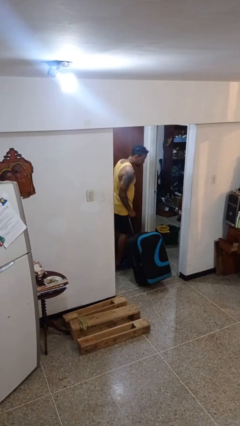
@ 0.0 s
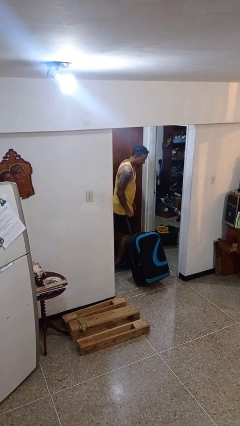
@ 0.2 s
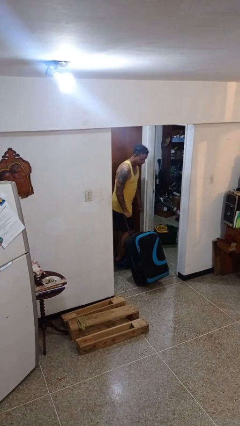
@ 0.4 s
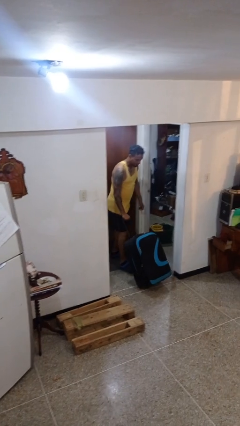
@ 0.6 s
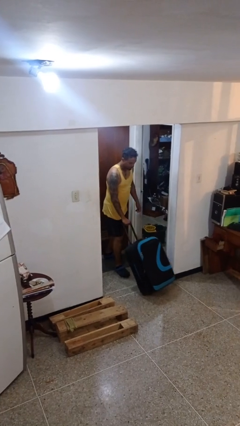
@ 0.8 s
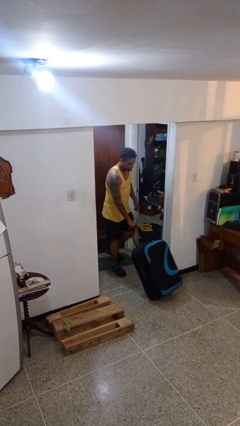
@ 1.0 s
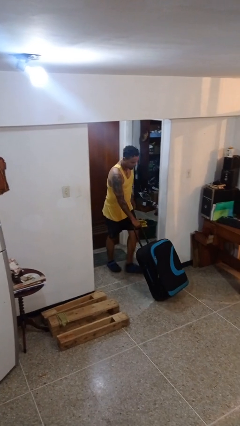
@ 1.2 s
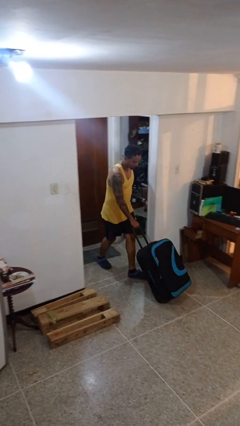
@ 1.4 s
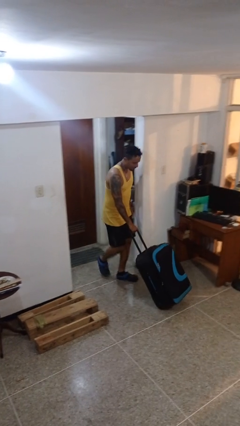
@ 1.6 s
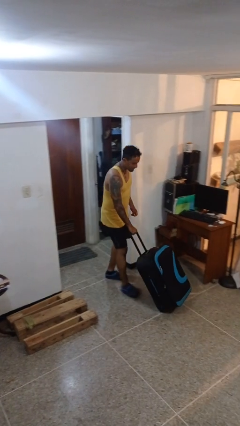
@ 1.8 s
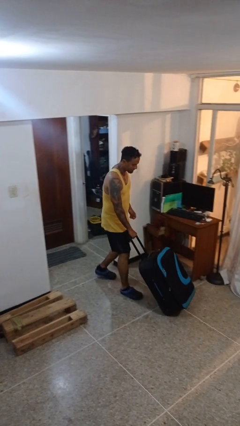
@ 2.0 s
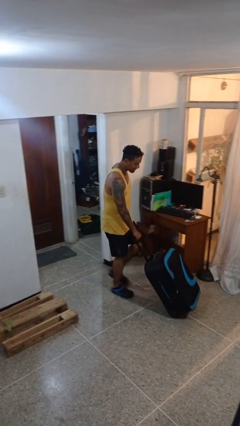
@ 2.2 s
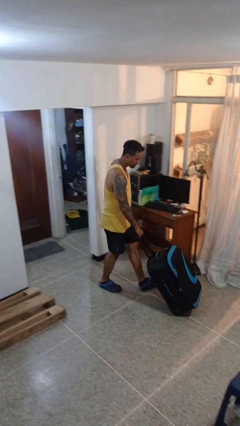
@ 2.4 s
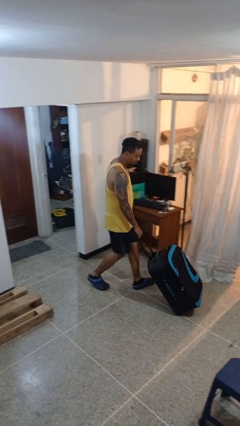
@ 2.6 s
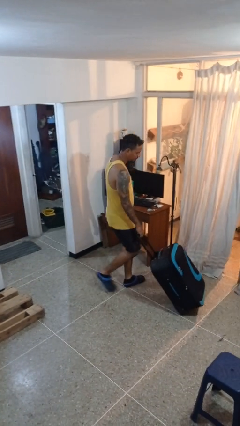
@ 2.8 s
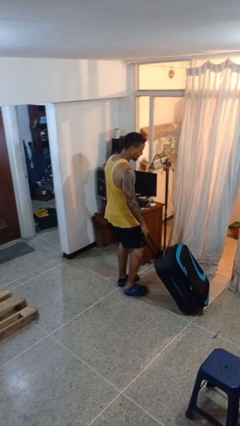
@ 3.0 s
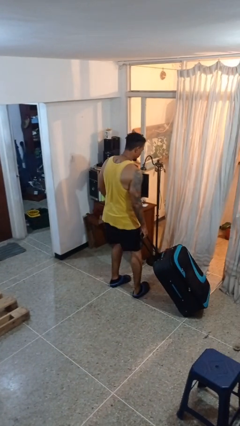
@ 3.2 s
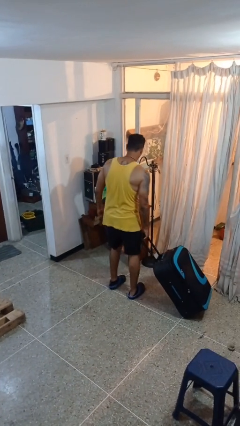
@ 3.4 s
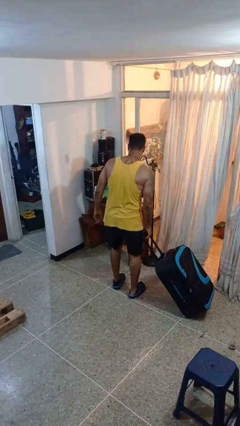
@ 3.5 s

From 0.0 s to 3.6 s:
person pushes wheeled cart

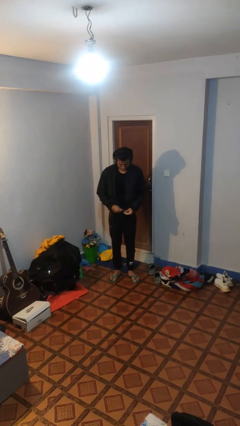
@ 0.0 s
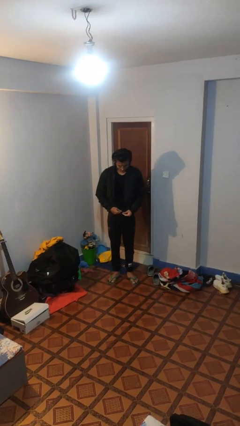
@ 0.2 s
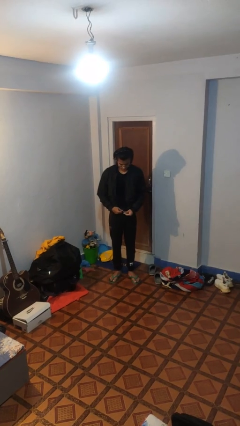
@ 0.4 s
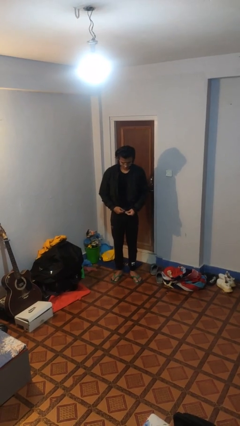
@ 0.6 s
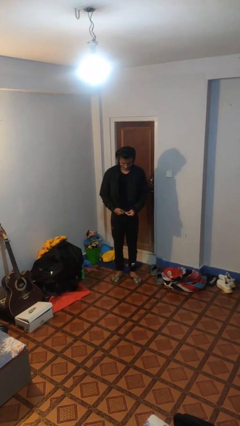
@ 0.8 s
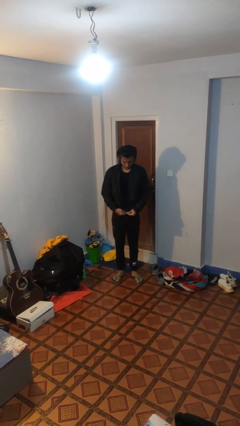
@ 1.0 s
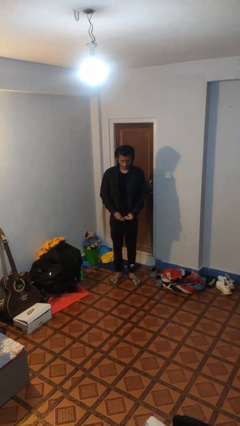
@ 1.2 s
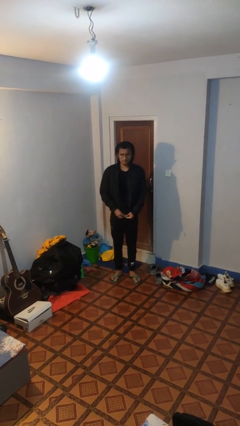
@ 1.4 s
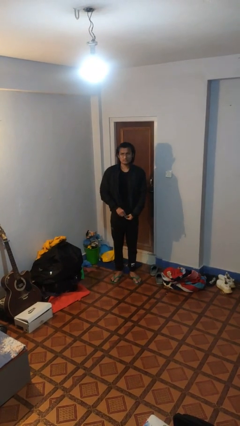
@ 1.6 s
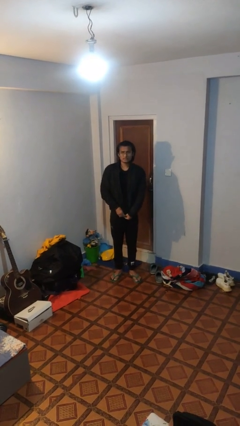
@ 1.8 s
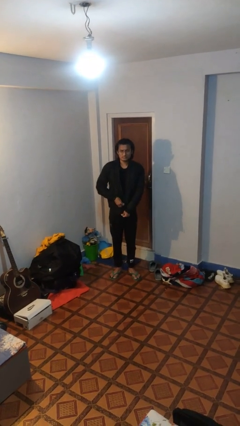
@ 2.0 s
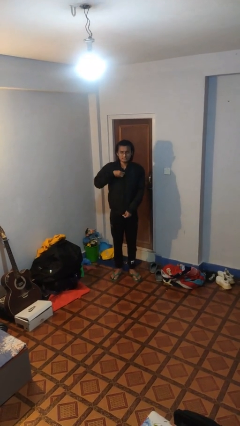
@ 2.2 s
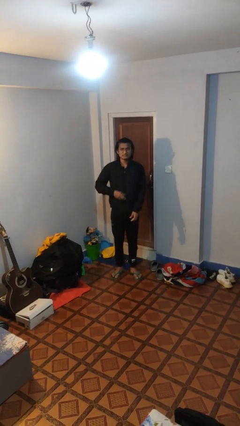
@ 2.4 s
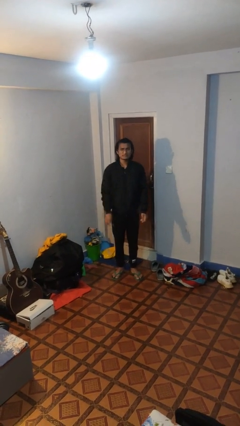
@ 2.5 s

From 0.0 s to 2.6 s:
person zips up jacket

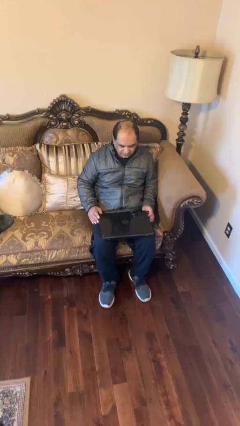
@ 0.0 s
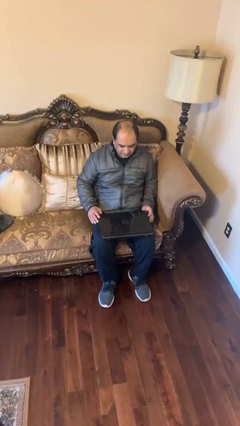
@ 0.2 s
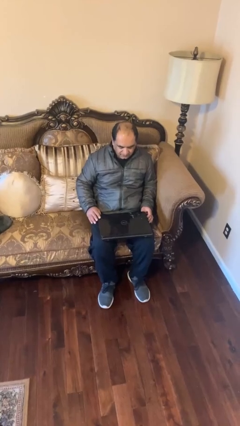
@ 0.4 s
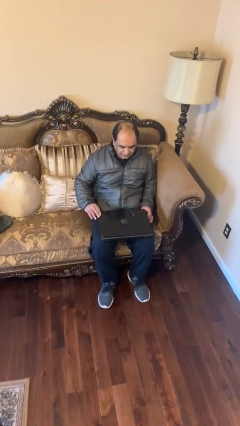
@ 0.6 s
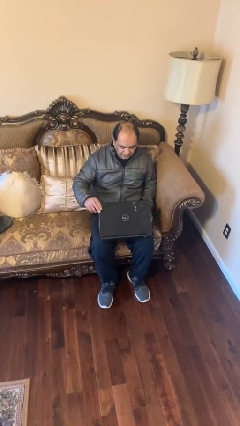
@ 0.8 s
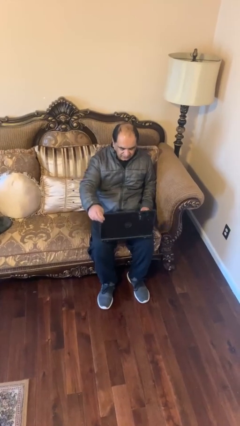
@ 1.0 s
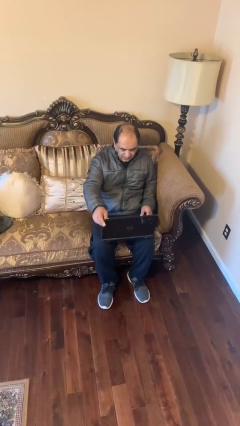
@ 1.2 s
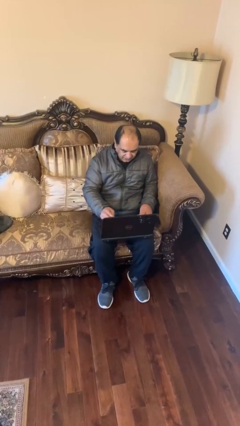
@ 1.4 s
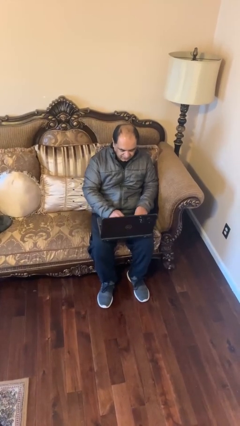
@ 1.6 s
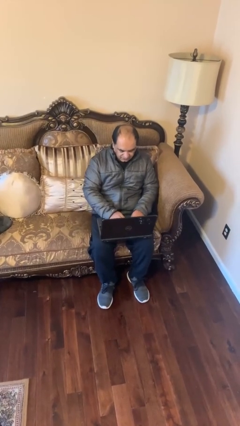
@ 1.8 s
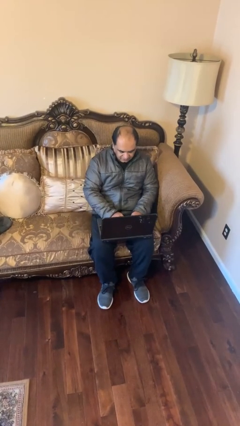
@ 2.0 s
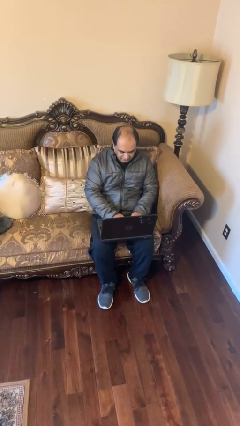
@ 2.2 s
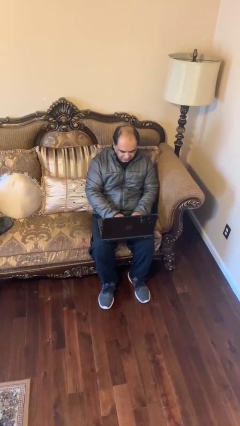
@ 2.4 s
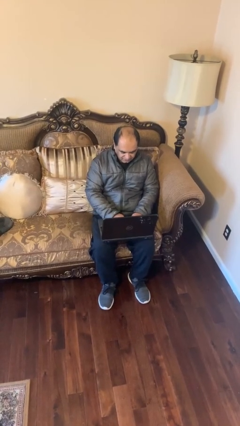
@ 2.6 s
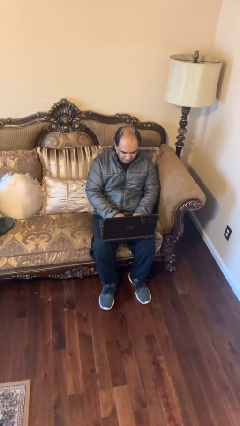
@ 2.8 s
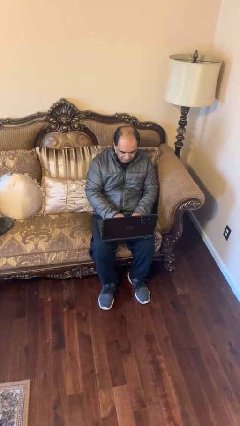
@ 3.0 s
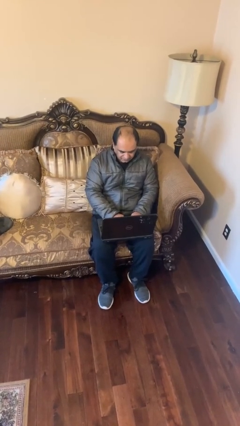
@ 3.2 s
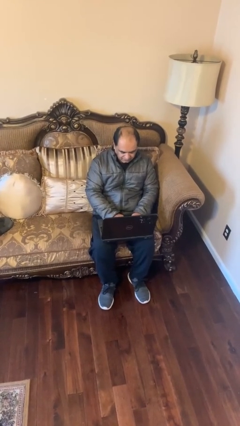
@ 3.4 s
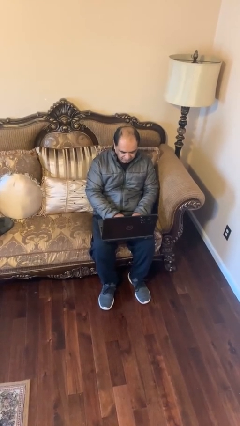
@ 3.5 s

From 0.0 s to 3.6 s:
person interacts with laptop

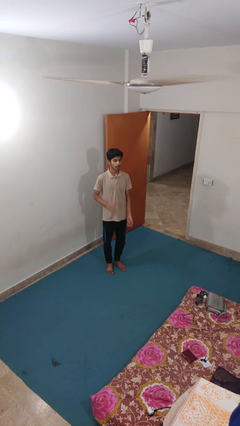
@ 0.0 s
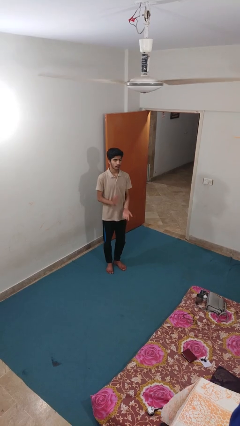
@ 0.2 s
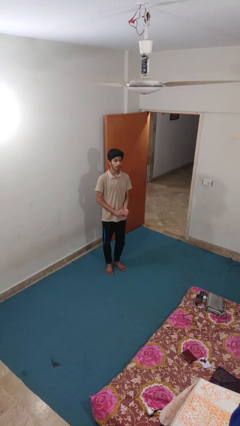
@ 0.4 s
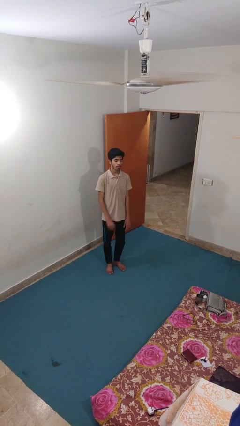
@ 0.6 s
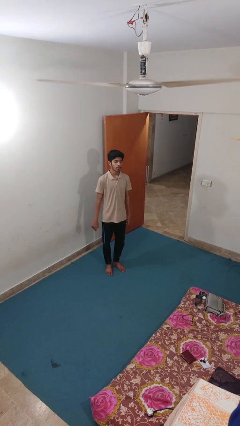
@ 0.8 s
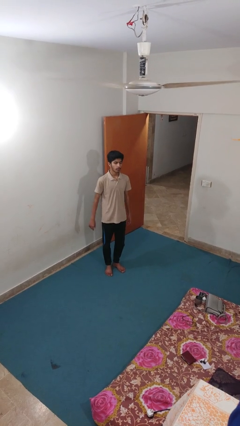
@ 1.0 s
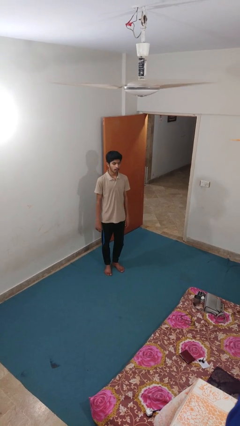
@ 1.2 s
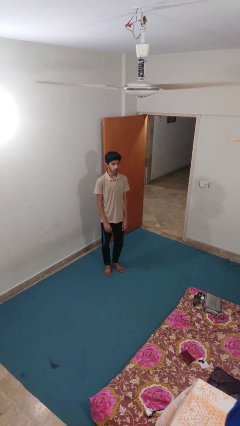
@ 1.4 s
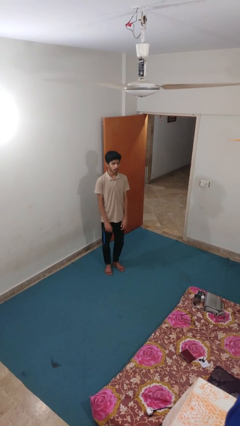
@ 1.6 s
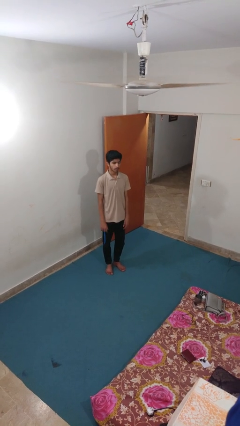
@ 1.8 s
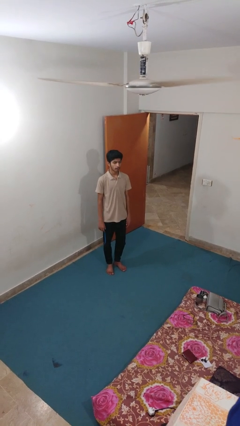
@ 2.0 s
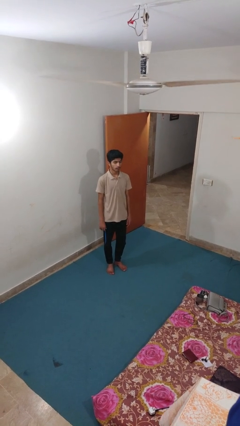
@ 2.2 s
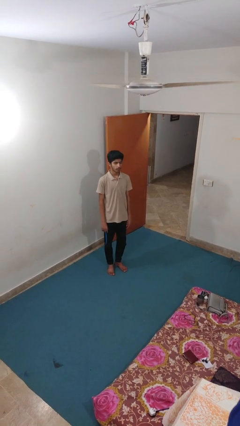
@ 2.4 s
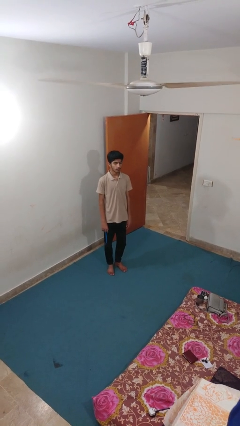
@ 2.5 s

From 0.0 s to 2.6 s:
person claps hands

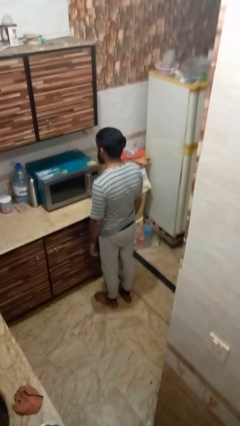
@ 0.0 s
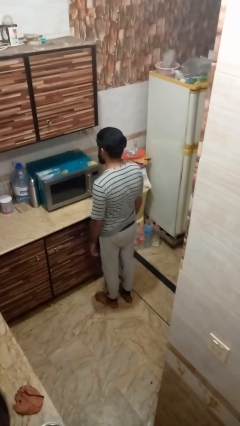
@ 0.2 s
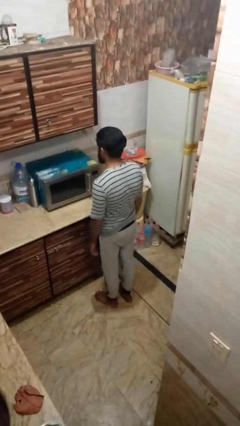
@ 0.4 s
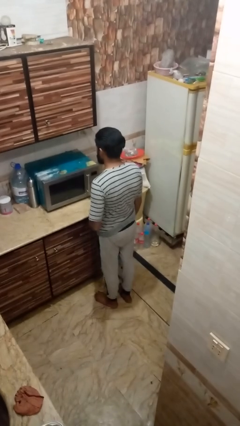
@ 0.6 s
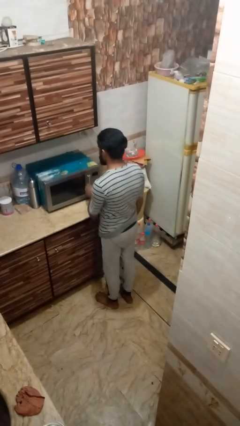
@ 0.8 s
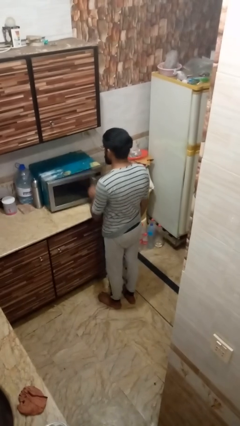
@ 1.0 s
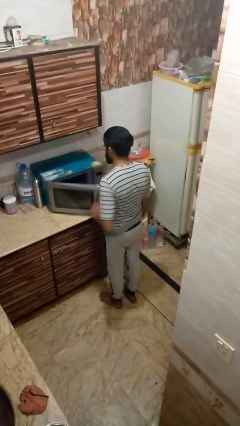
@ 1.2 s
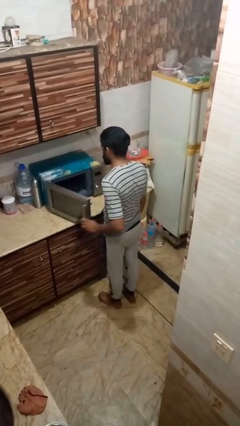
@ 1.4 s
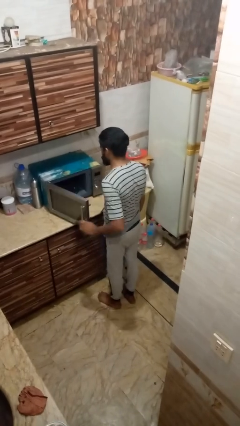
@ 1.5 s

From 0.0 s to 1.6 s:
person opens oven door

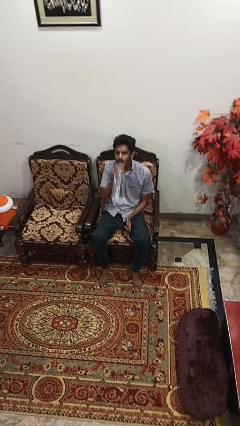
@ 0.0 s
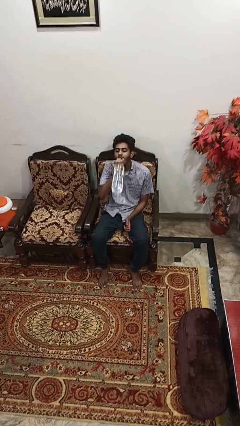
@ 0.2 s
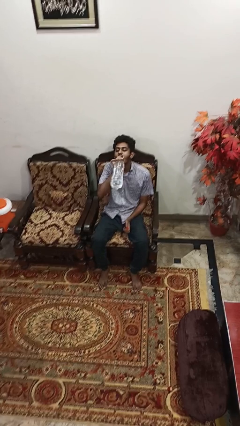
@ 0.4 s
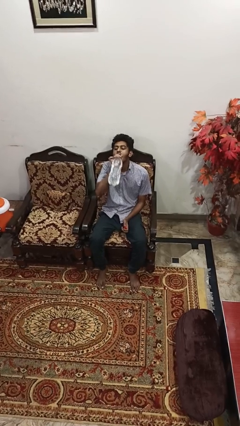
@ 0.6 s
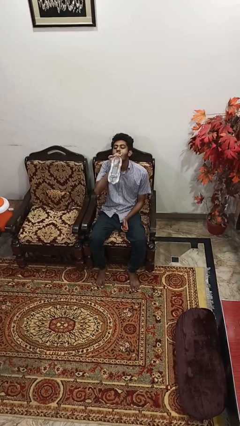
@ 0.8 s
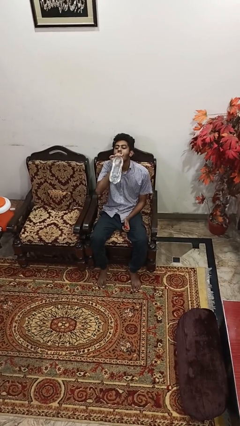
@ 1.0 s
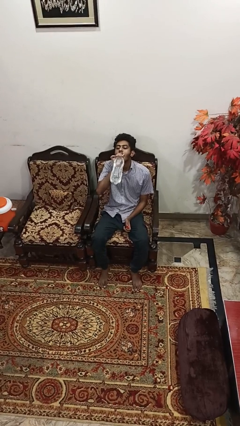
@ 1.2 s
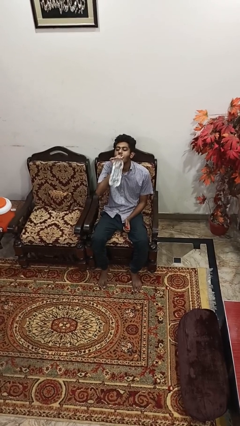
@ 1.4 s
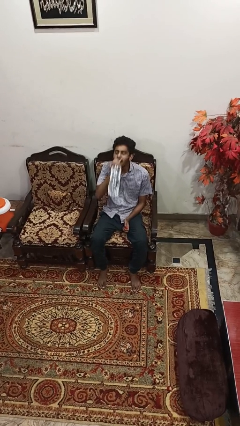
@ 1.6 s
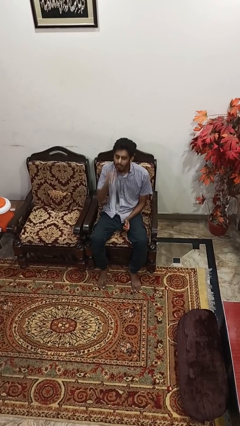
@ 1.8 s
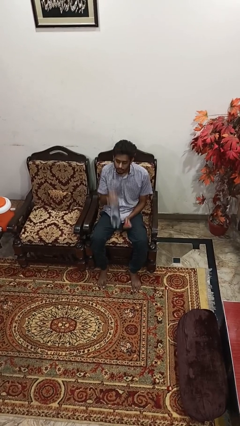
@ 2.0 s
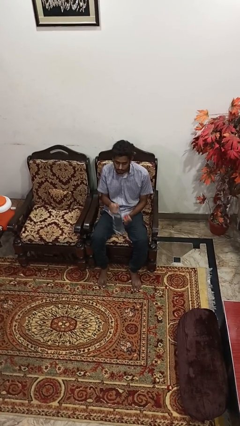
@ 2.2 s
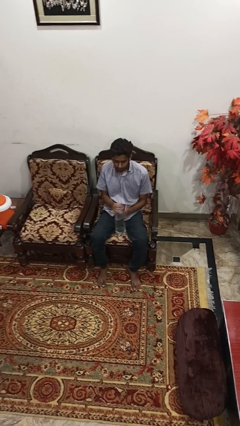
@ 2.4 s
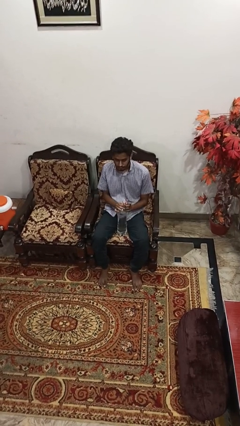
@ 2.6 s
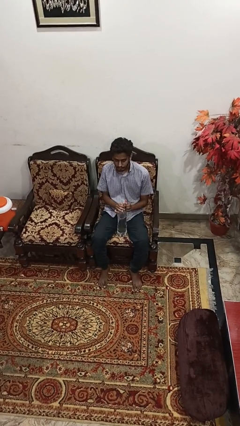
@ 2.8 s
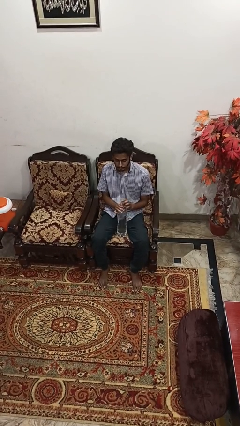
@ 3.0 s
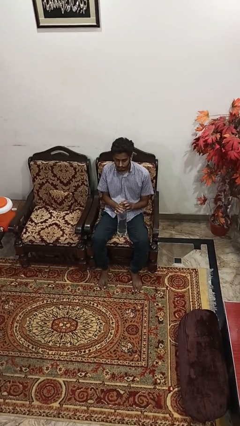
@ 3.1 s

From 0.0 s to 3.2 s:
person drinks from bottle

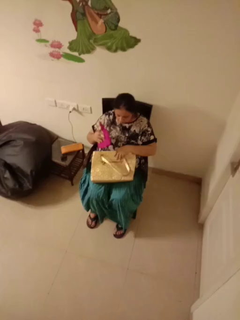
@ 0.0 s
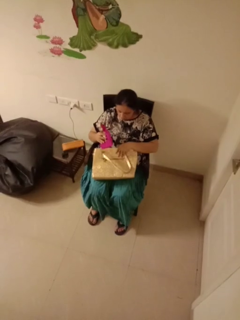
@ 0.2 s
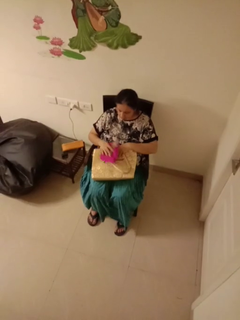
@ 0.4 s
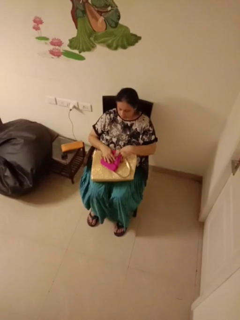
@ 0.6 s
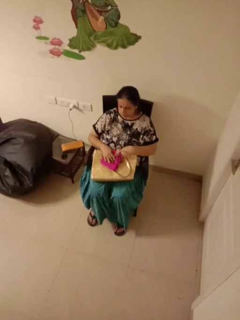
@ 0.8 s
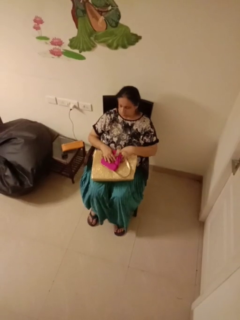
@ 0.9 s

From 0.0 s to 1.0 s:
person takes object from purse
